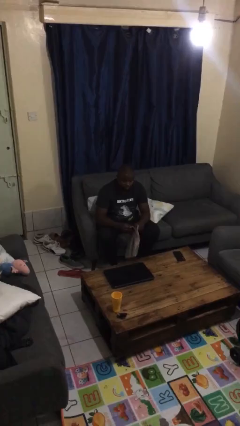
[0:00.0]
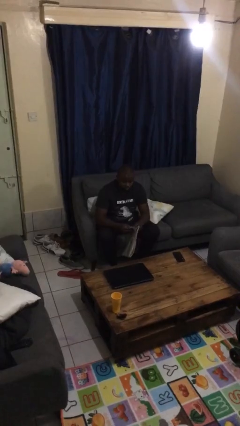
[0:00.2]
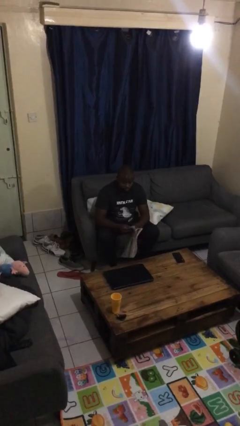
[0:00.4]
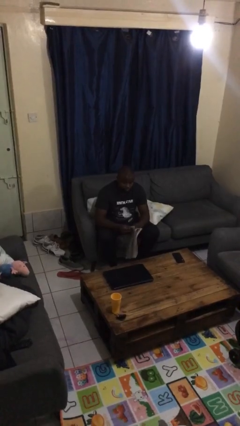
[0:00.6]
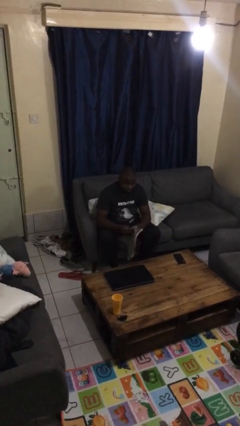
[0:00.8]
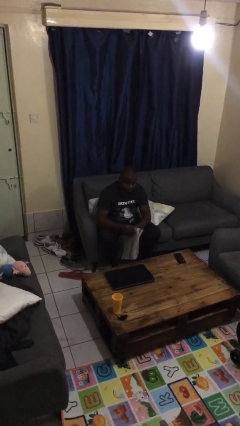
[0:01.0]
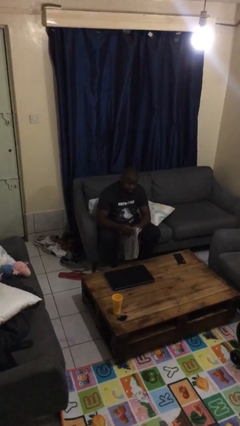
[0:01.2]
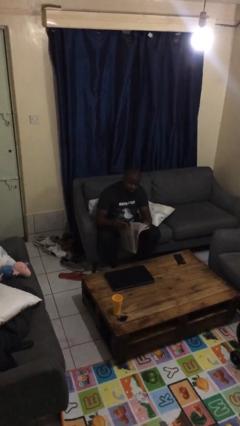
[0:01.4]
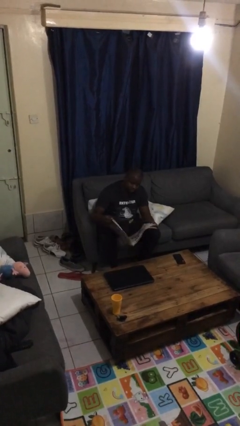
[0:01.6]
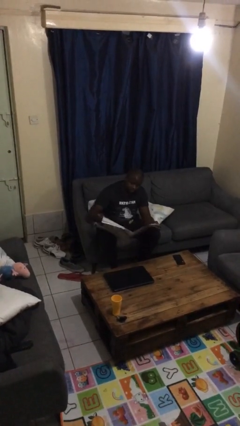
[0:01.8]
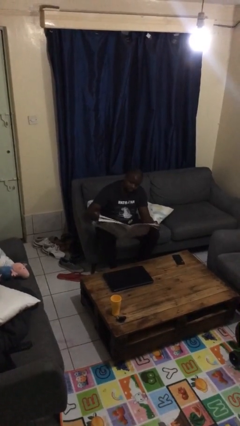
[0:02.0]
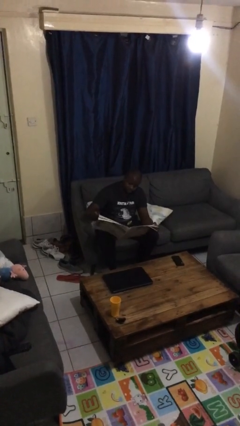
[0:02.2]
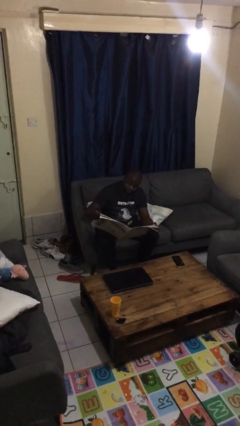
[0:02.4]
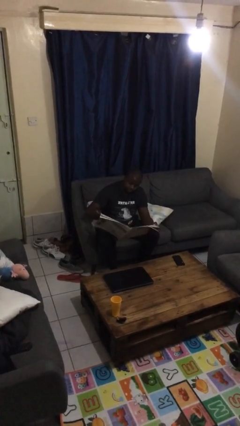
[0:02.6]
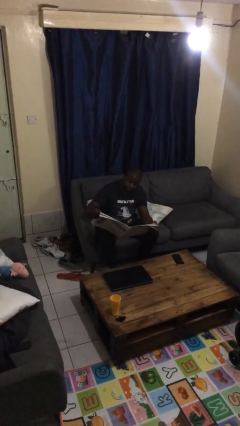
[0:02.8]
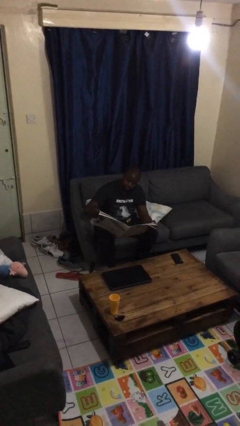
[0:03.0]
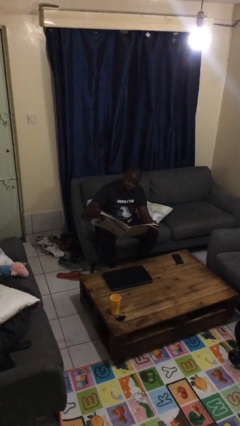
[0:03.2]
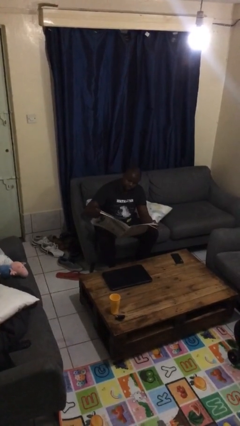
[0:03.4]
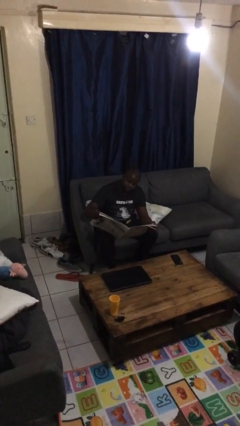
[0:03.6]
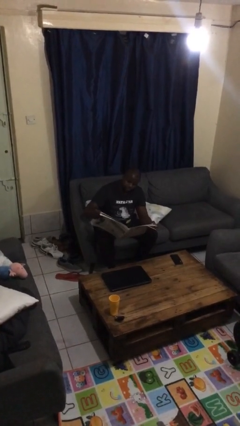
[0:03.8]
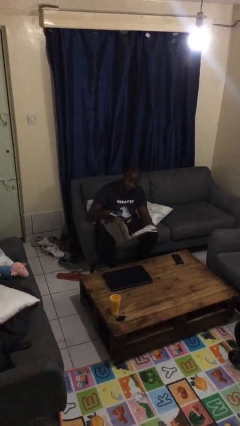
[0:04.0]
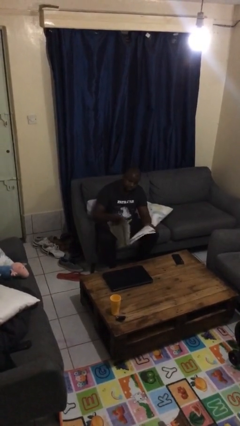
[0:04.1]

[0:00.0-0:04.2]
person reads newspaper

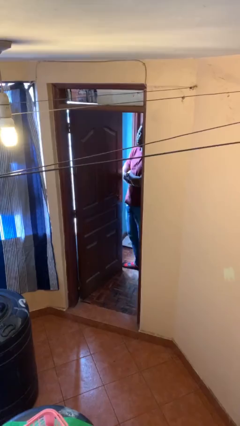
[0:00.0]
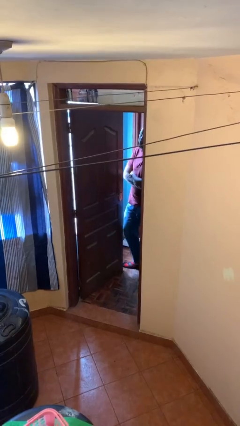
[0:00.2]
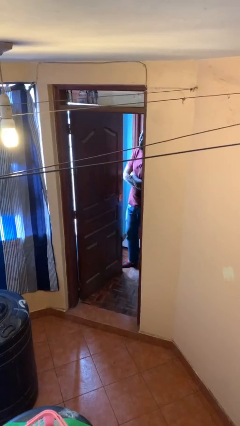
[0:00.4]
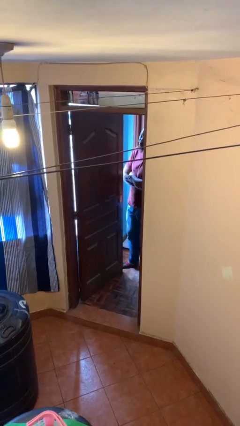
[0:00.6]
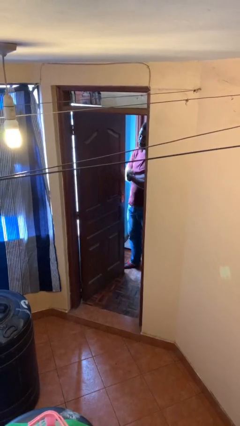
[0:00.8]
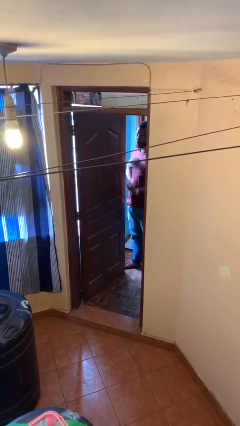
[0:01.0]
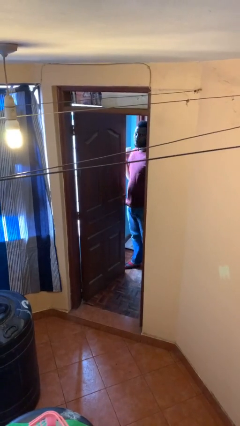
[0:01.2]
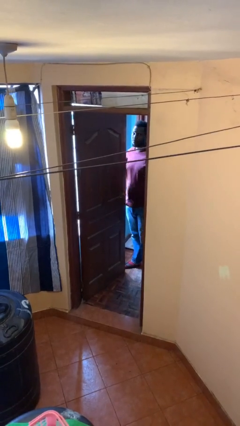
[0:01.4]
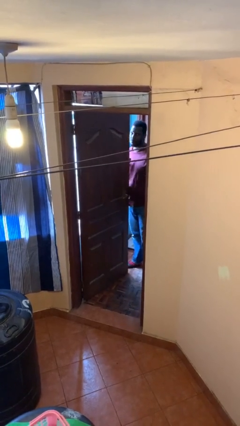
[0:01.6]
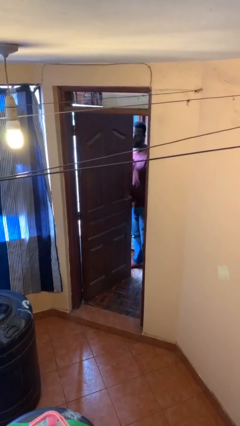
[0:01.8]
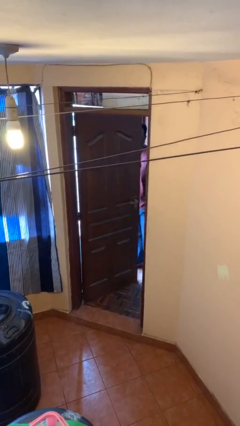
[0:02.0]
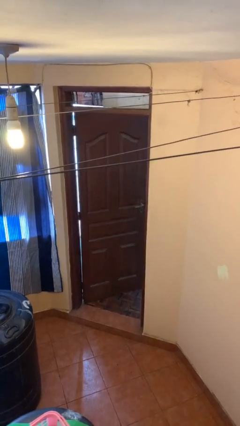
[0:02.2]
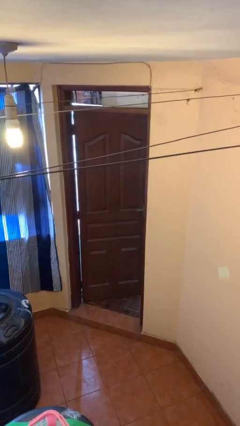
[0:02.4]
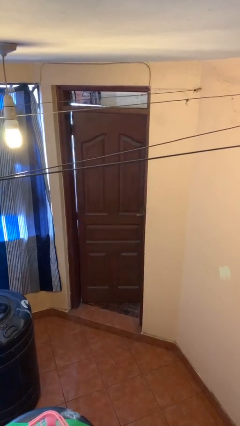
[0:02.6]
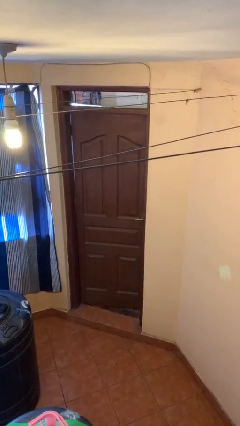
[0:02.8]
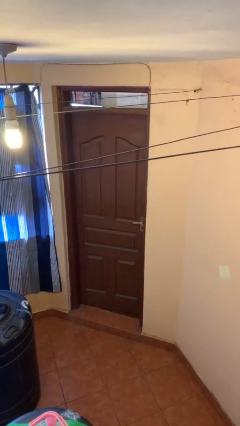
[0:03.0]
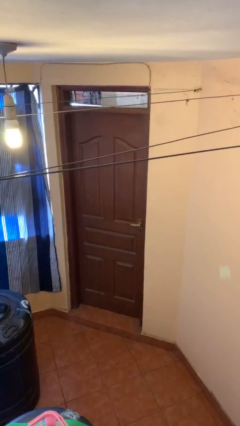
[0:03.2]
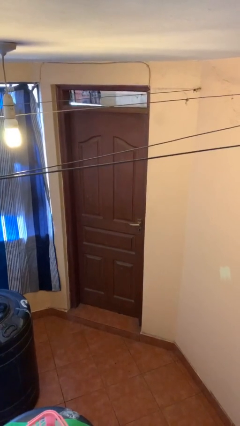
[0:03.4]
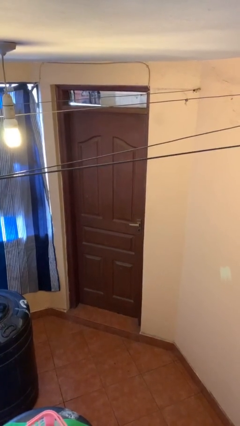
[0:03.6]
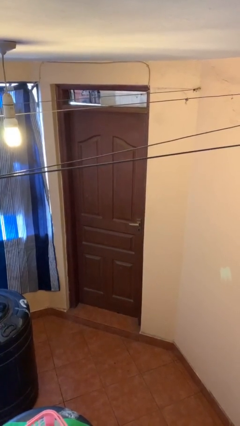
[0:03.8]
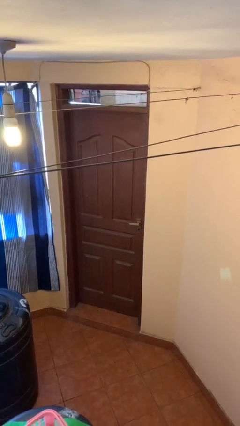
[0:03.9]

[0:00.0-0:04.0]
person closes facility door

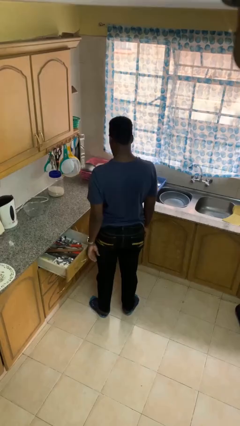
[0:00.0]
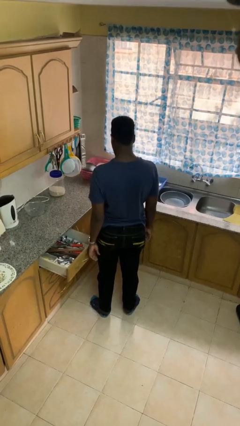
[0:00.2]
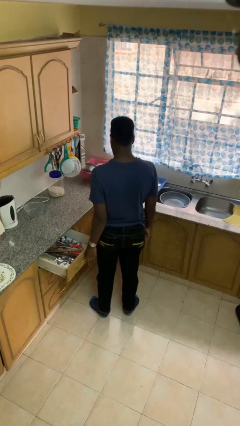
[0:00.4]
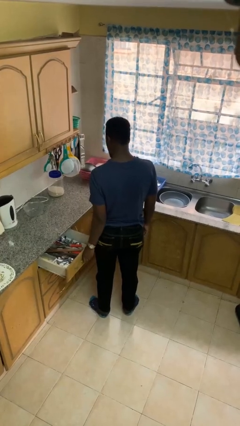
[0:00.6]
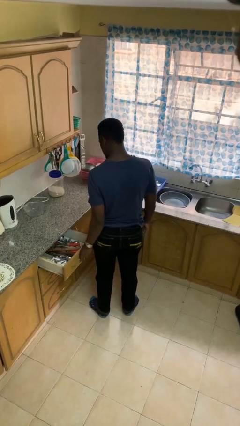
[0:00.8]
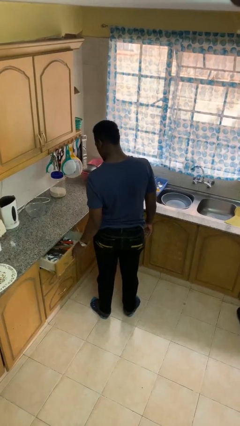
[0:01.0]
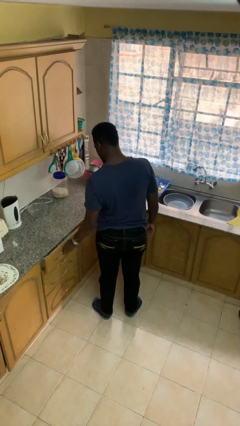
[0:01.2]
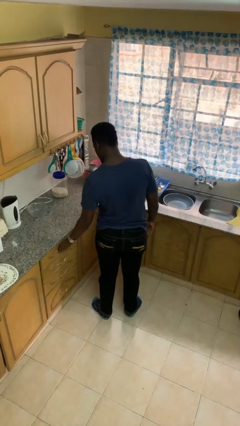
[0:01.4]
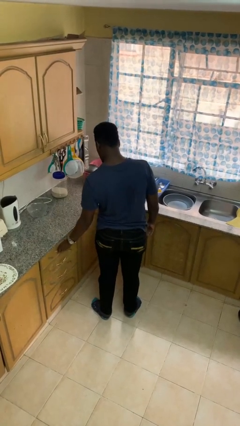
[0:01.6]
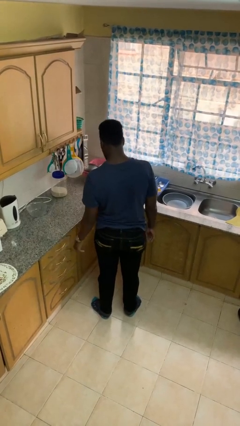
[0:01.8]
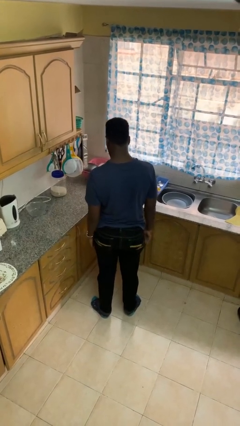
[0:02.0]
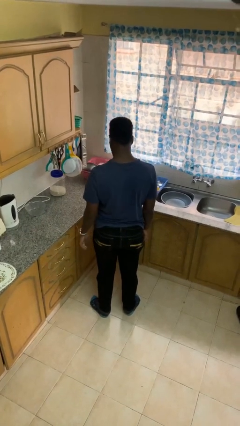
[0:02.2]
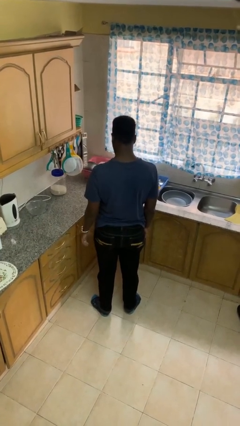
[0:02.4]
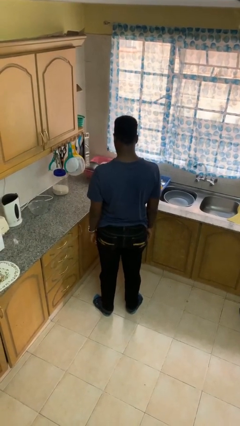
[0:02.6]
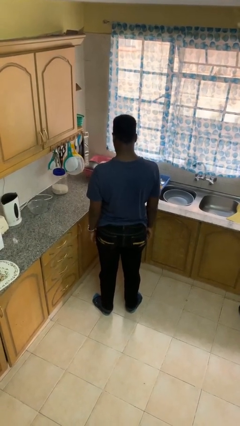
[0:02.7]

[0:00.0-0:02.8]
person closes kitchen drawer

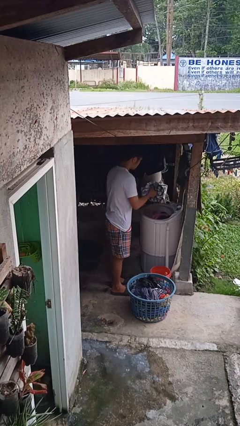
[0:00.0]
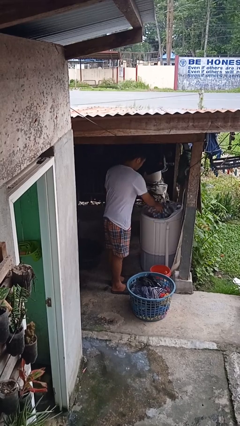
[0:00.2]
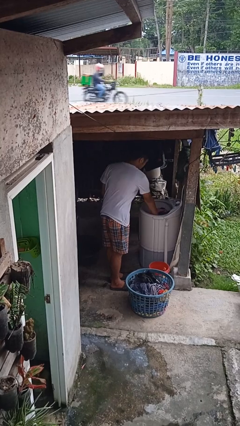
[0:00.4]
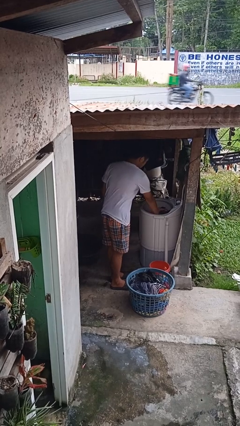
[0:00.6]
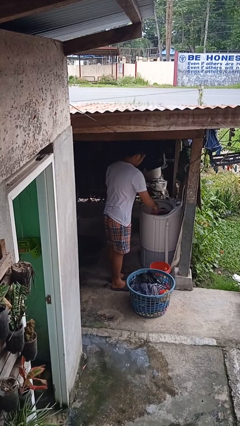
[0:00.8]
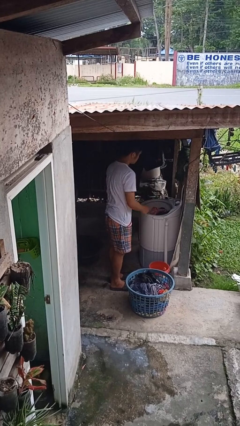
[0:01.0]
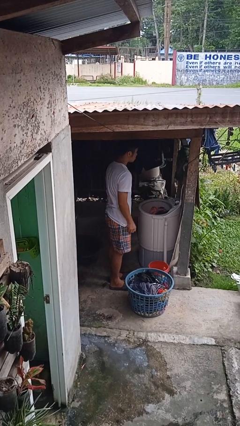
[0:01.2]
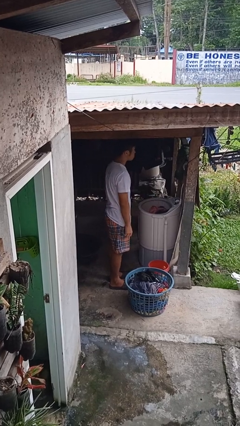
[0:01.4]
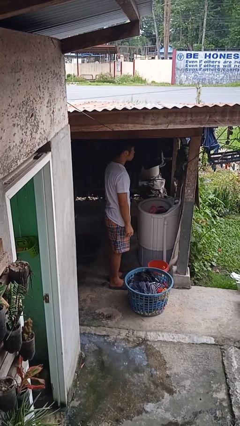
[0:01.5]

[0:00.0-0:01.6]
person loads clotheswasher

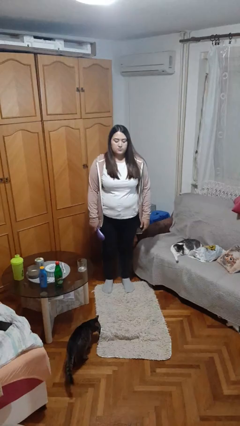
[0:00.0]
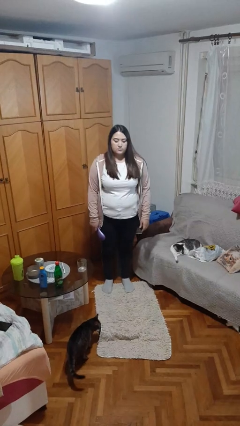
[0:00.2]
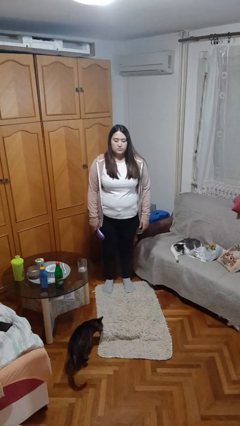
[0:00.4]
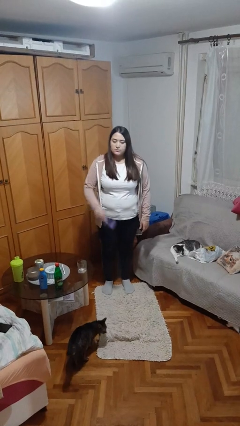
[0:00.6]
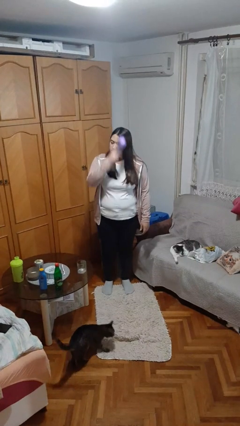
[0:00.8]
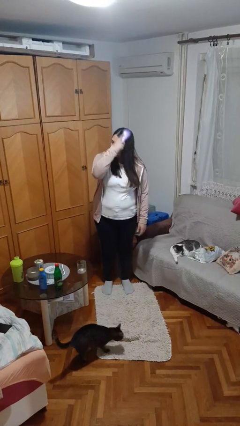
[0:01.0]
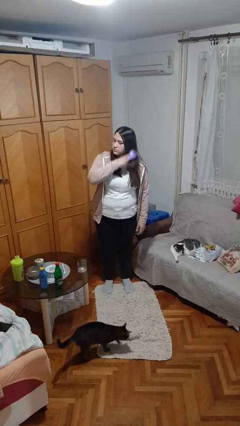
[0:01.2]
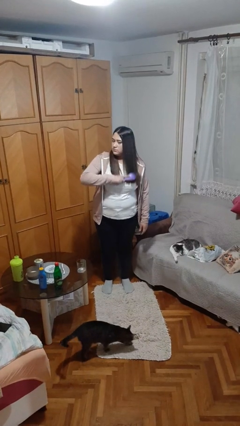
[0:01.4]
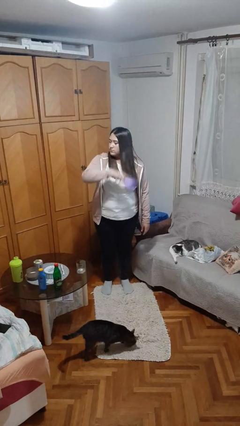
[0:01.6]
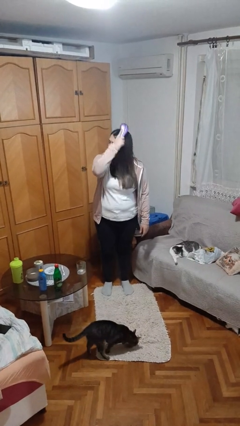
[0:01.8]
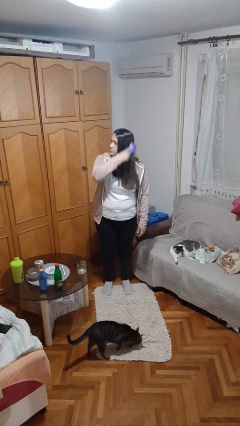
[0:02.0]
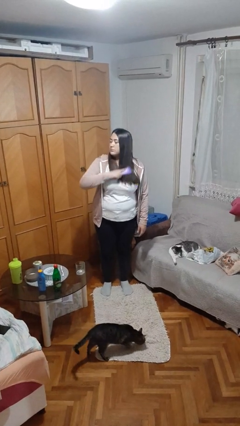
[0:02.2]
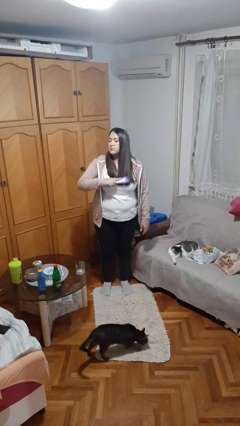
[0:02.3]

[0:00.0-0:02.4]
person brushes hair

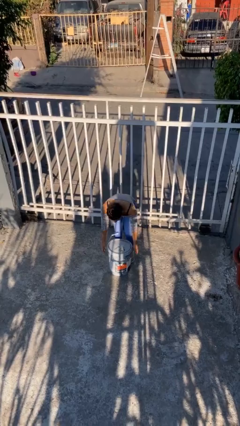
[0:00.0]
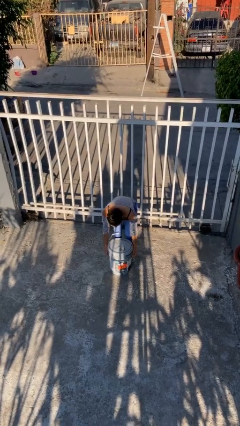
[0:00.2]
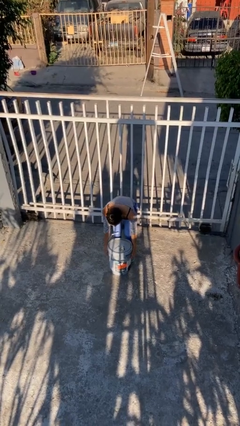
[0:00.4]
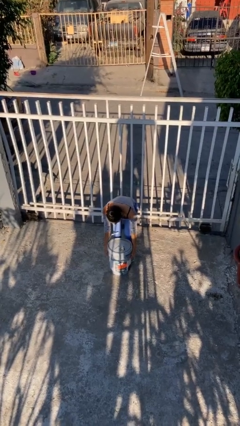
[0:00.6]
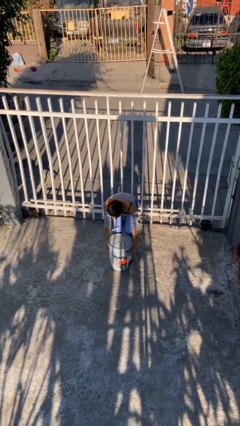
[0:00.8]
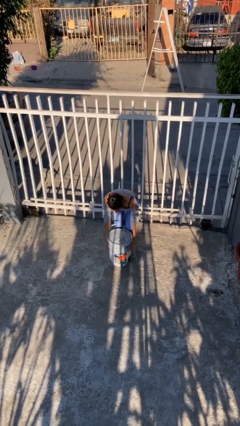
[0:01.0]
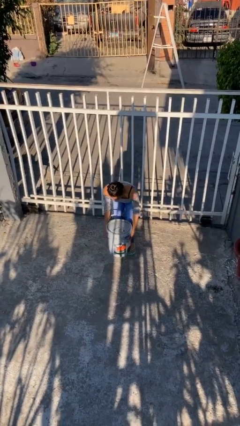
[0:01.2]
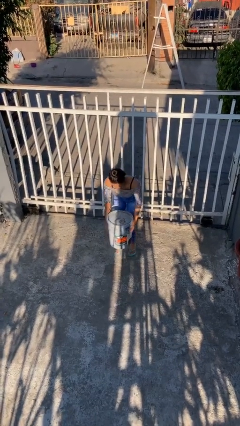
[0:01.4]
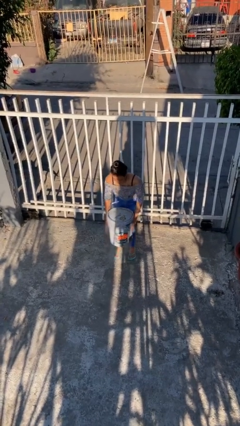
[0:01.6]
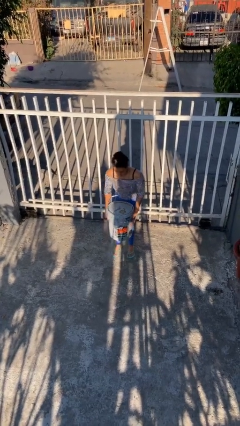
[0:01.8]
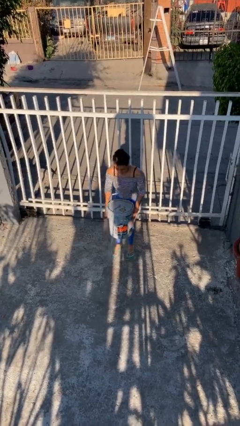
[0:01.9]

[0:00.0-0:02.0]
person picks up object from floor

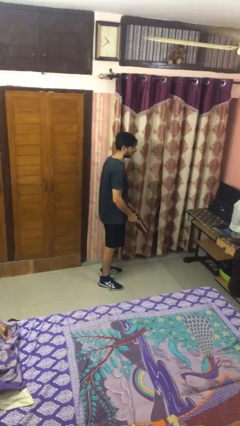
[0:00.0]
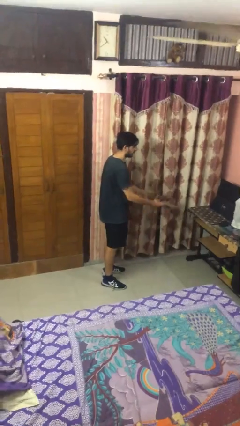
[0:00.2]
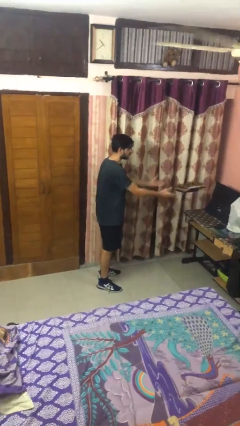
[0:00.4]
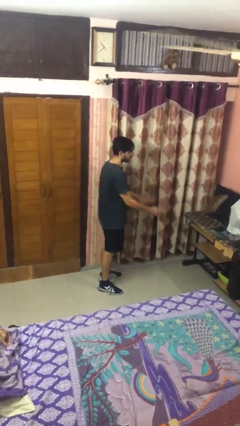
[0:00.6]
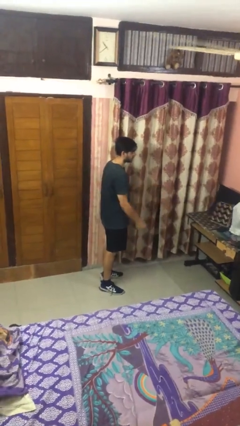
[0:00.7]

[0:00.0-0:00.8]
person throws object on table
